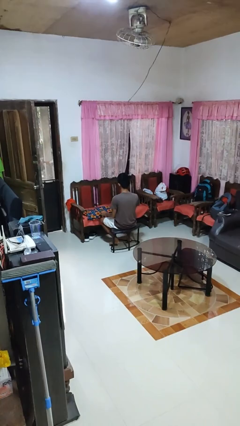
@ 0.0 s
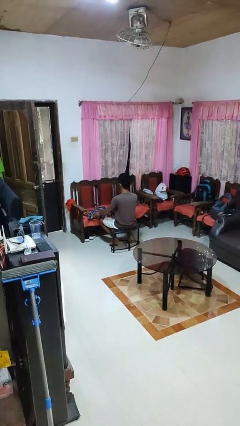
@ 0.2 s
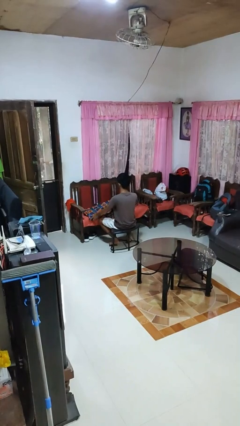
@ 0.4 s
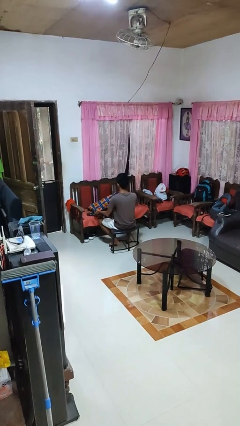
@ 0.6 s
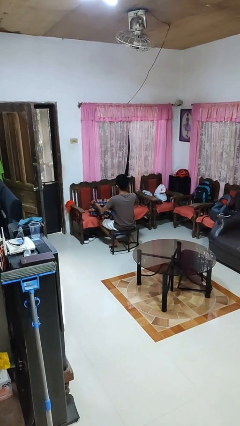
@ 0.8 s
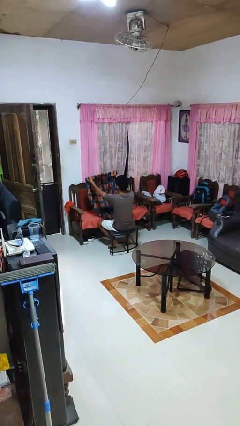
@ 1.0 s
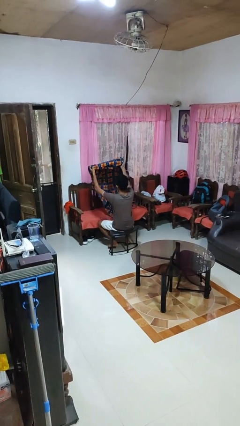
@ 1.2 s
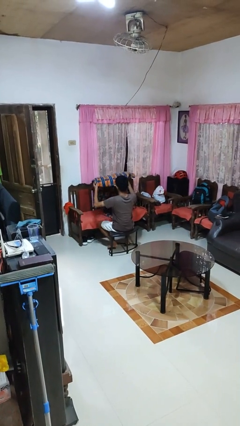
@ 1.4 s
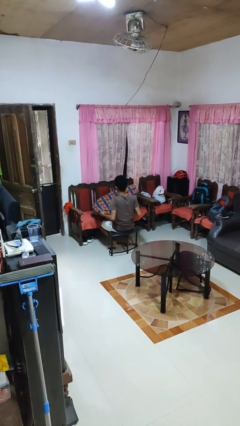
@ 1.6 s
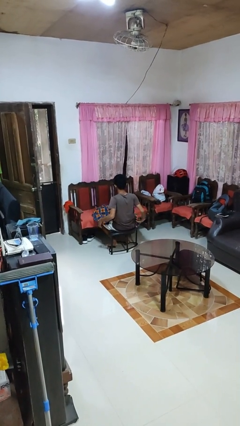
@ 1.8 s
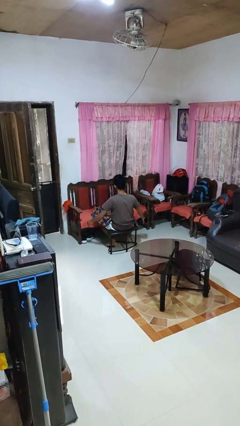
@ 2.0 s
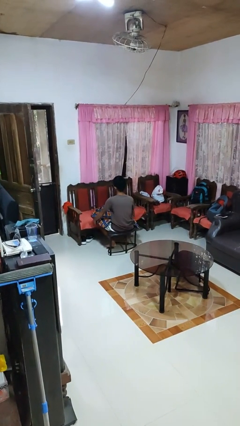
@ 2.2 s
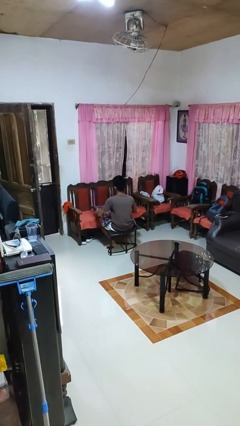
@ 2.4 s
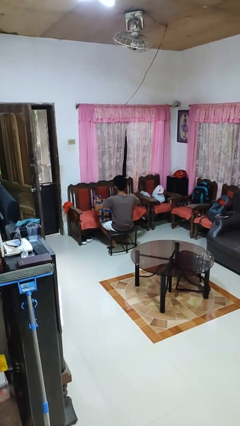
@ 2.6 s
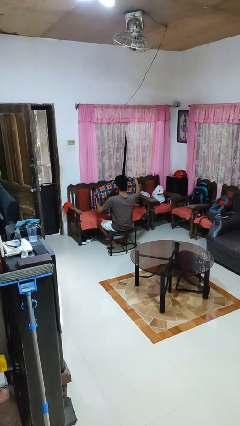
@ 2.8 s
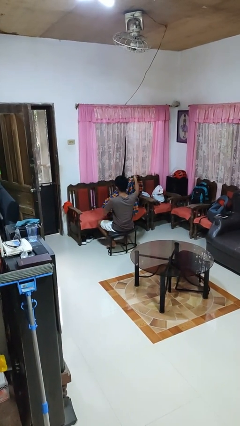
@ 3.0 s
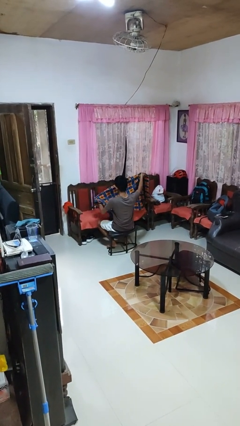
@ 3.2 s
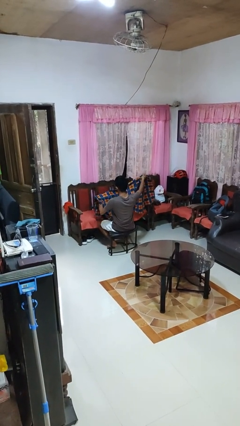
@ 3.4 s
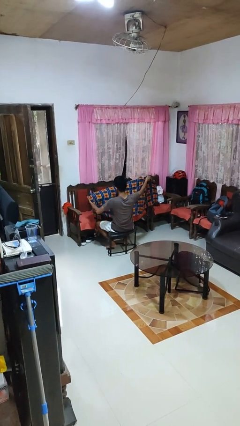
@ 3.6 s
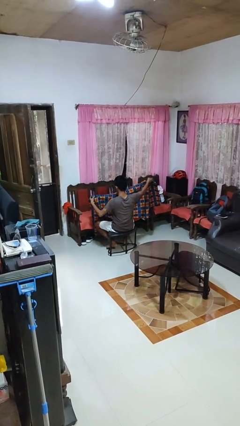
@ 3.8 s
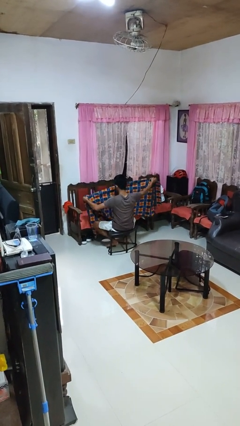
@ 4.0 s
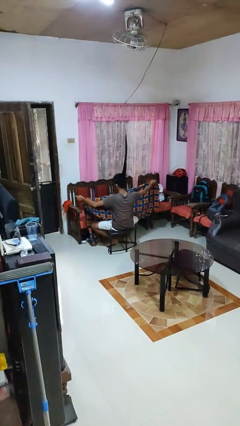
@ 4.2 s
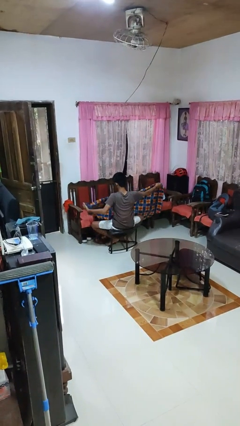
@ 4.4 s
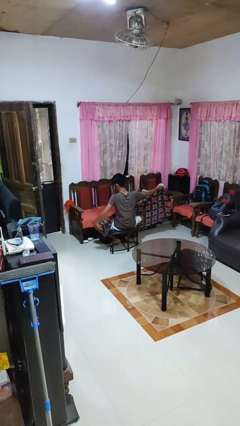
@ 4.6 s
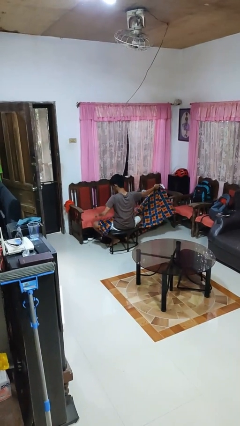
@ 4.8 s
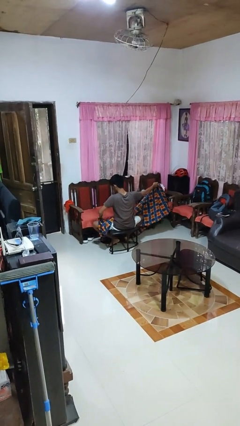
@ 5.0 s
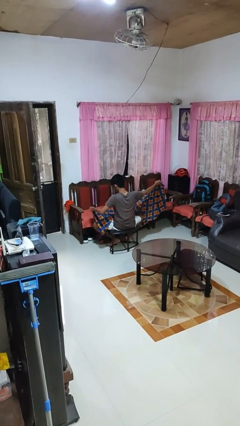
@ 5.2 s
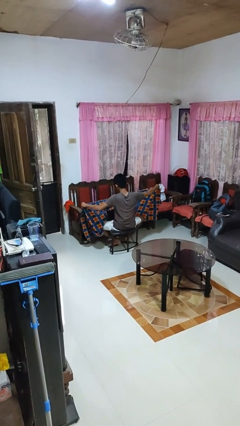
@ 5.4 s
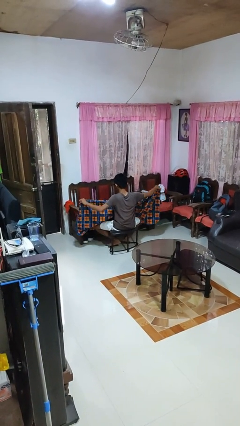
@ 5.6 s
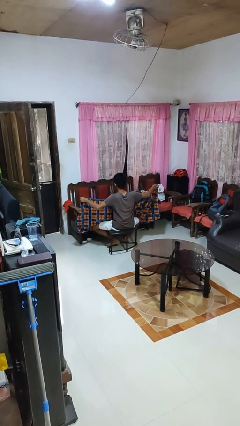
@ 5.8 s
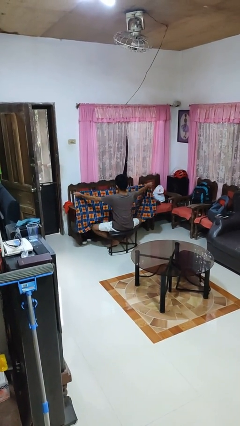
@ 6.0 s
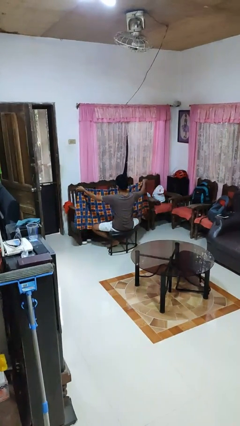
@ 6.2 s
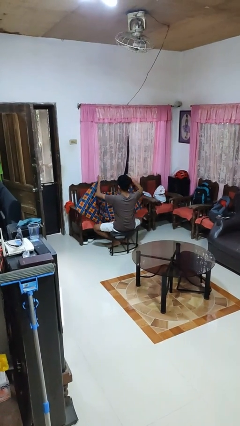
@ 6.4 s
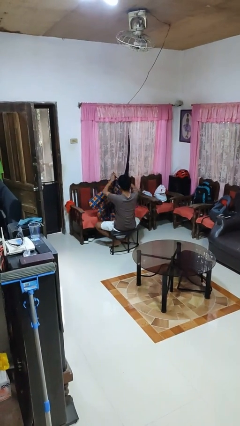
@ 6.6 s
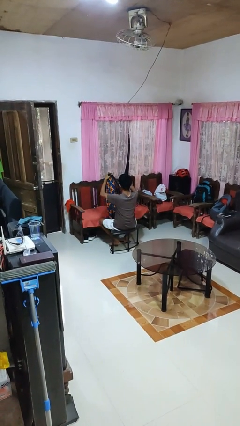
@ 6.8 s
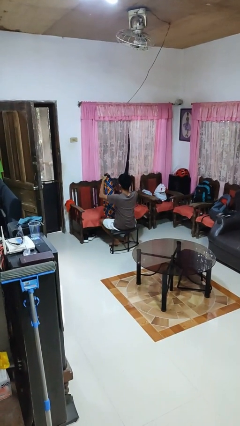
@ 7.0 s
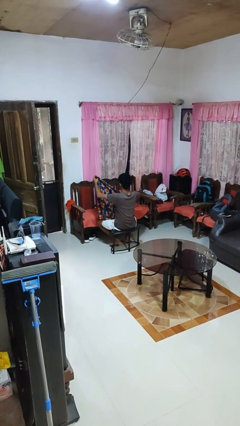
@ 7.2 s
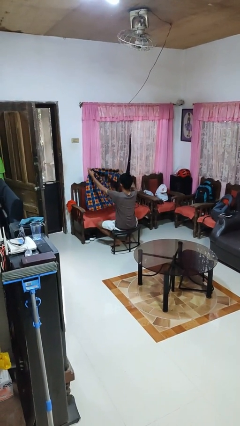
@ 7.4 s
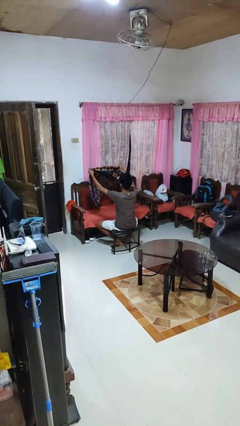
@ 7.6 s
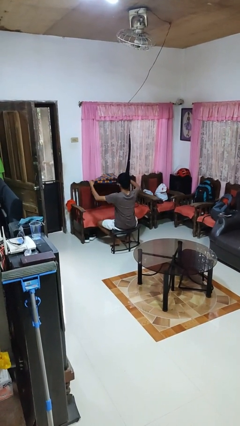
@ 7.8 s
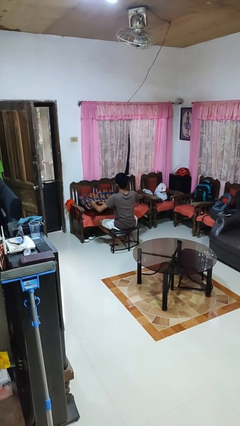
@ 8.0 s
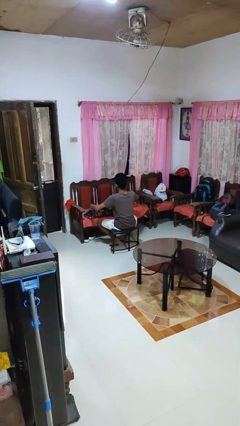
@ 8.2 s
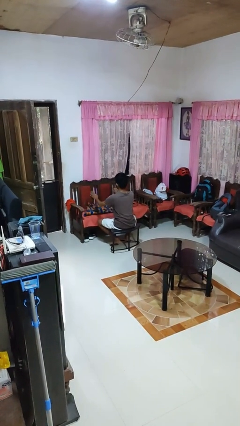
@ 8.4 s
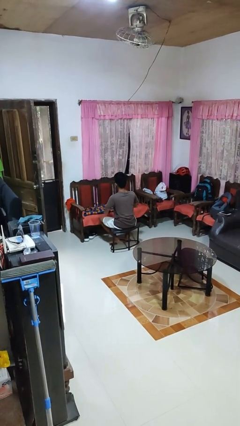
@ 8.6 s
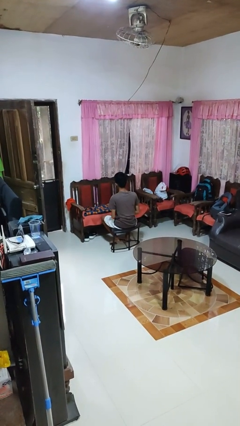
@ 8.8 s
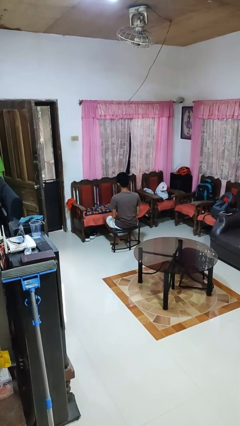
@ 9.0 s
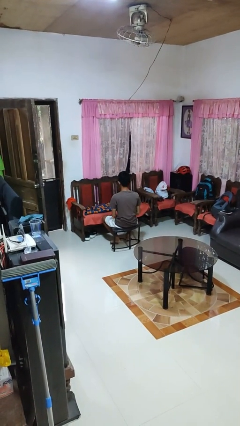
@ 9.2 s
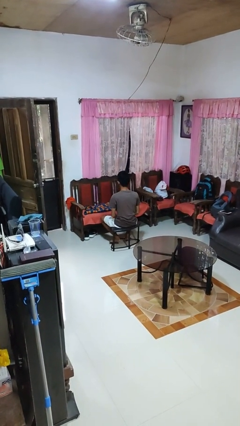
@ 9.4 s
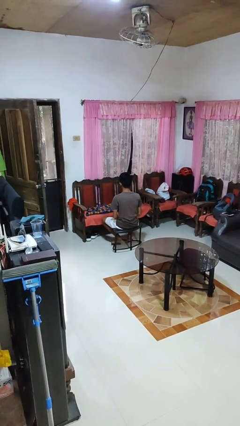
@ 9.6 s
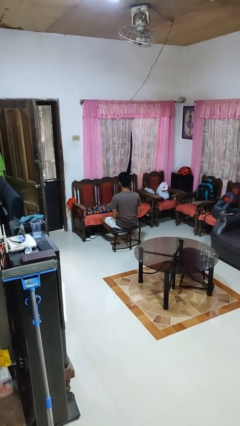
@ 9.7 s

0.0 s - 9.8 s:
person folds blanket

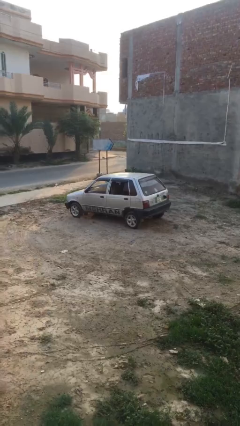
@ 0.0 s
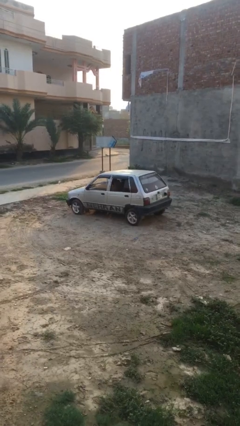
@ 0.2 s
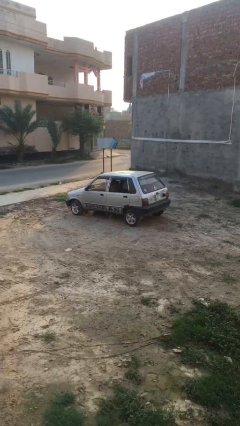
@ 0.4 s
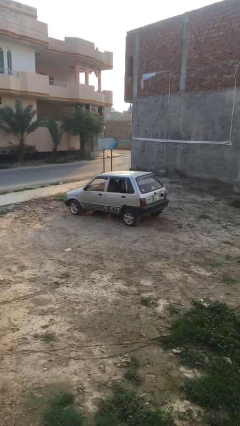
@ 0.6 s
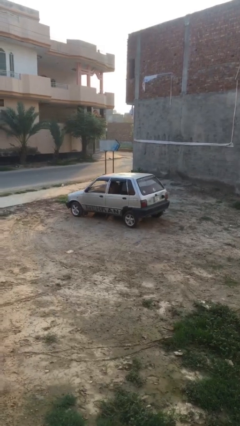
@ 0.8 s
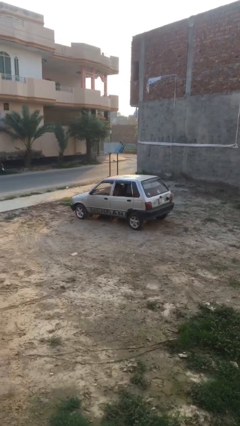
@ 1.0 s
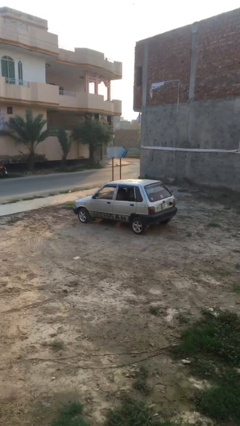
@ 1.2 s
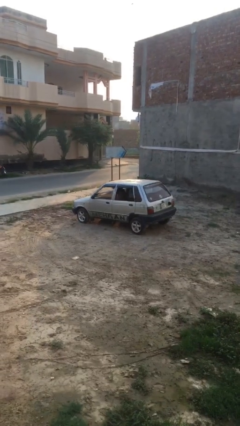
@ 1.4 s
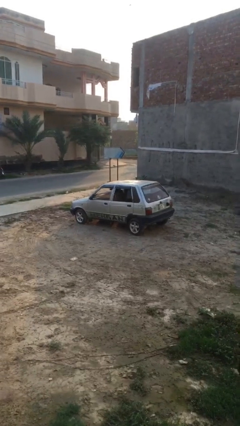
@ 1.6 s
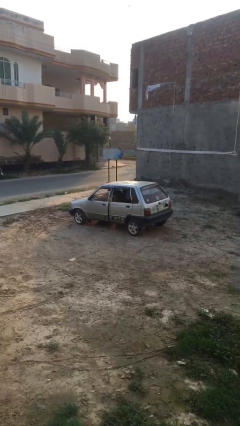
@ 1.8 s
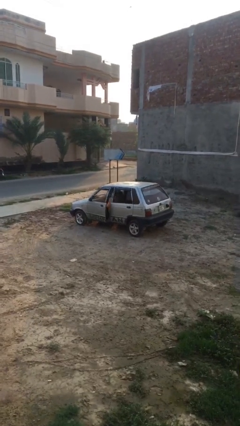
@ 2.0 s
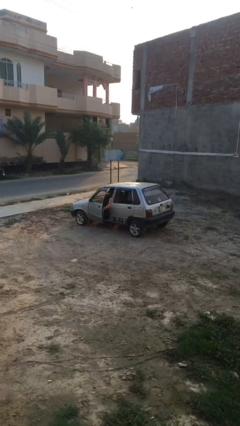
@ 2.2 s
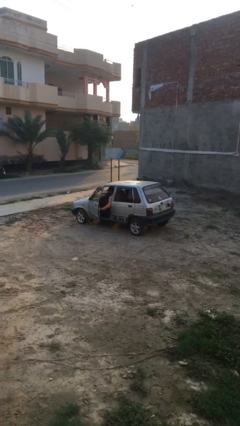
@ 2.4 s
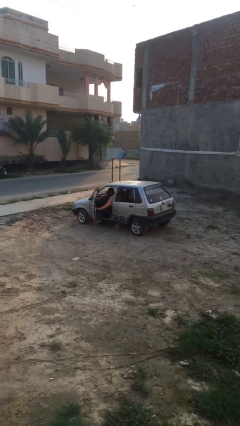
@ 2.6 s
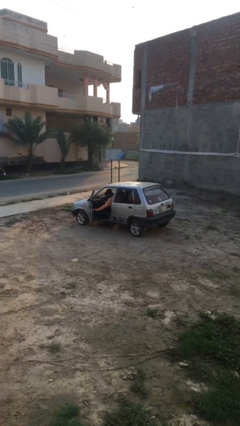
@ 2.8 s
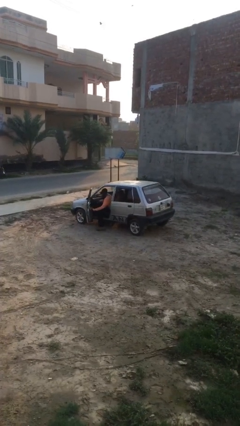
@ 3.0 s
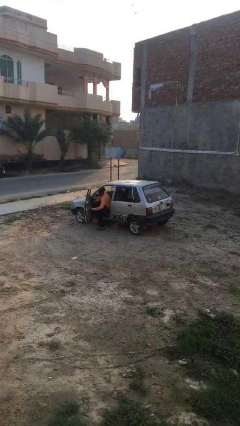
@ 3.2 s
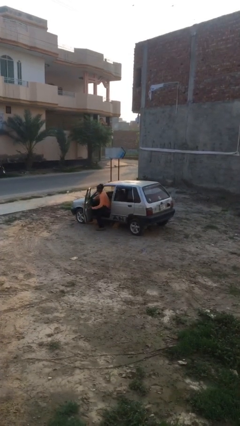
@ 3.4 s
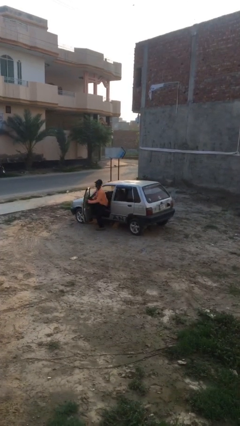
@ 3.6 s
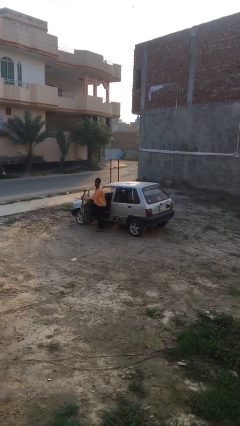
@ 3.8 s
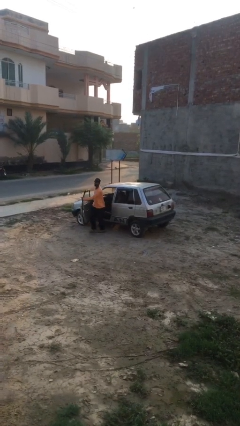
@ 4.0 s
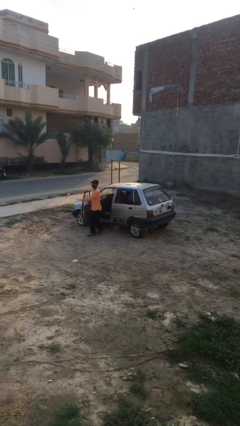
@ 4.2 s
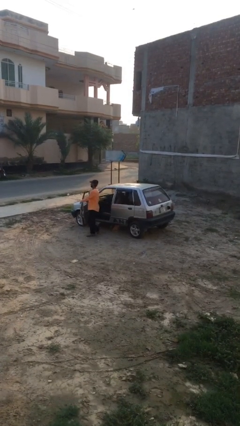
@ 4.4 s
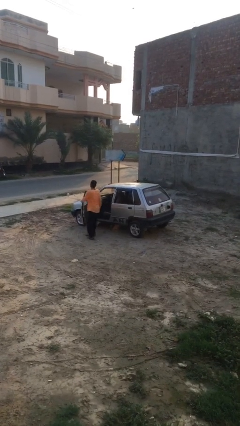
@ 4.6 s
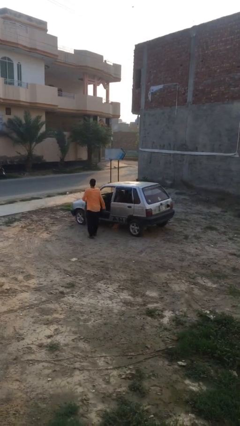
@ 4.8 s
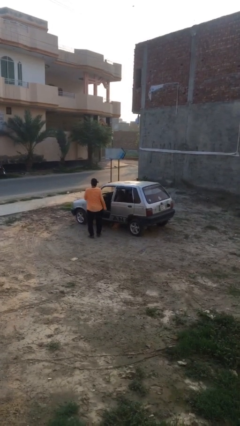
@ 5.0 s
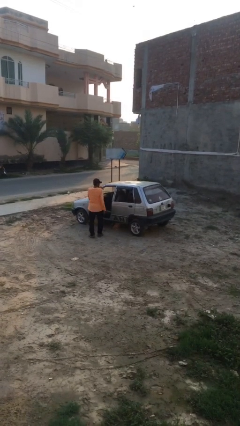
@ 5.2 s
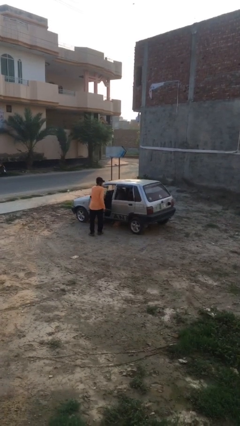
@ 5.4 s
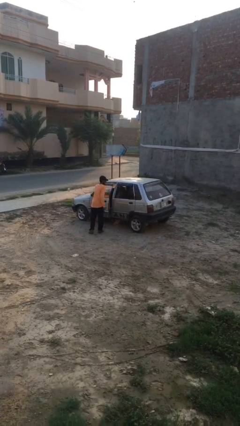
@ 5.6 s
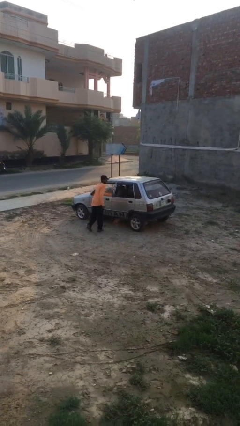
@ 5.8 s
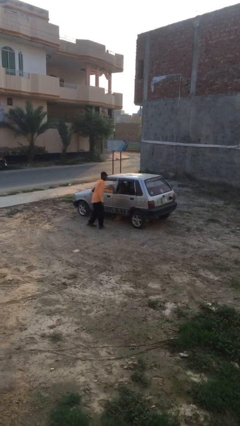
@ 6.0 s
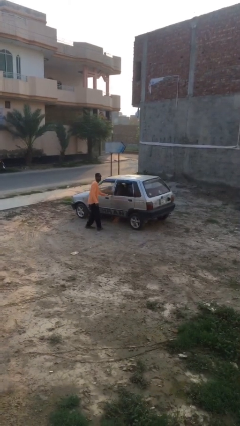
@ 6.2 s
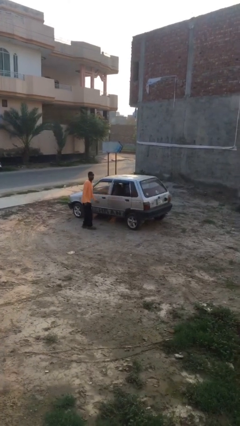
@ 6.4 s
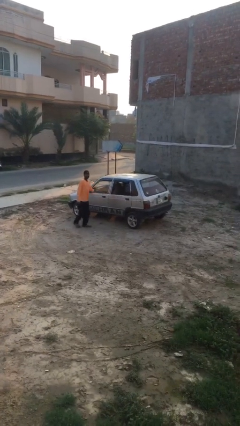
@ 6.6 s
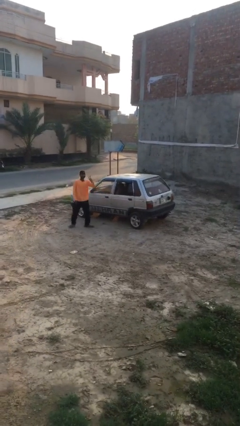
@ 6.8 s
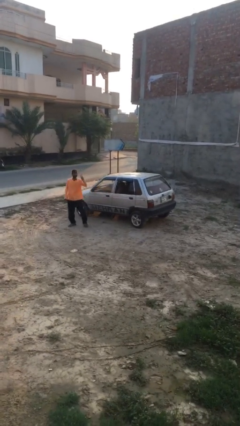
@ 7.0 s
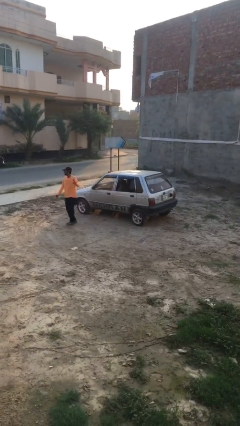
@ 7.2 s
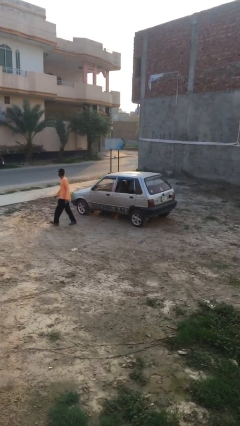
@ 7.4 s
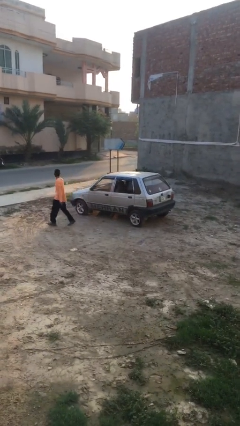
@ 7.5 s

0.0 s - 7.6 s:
car drops off person

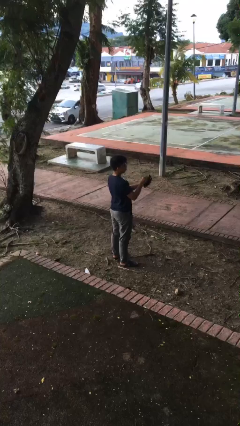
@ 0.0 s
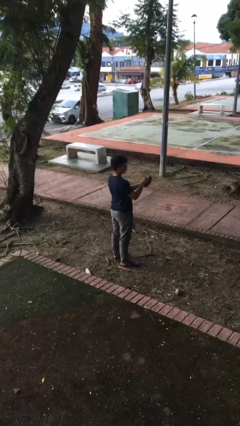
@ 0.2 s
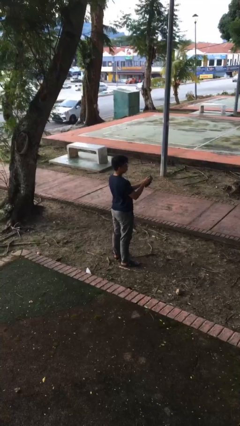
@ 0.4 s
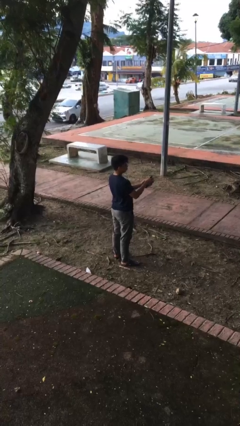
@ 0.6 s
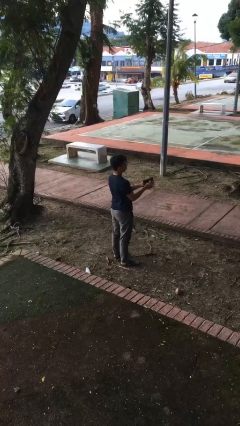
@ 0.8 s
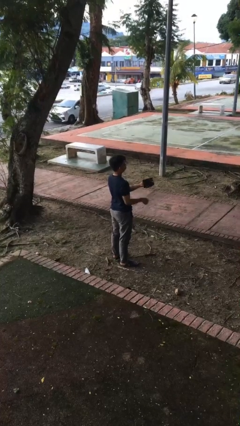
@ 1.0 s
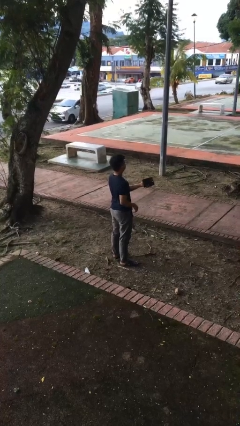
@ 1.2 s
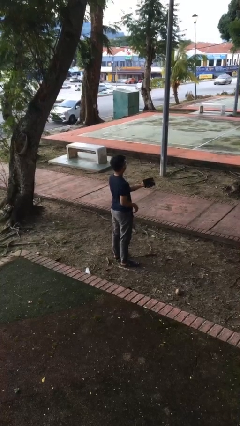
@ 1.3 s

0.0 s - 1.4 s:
person puts object into purse
